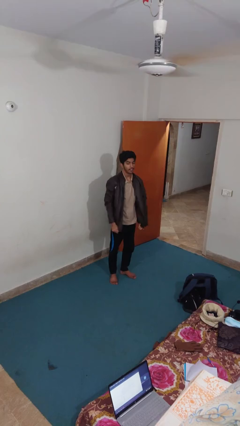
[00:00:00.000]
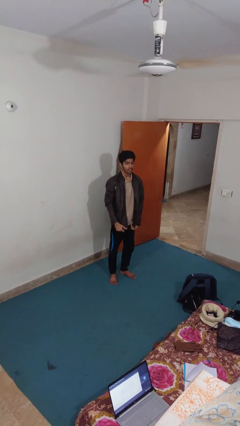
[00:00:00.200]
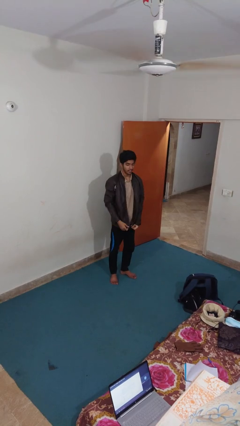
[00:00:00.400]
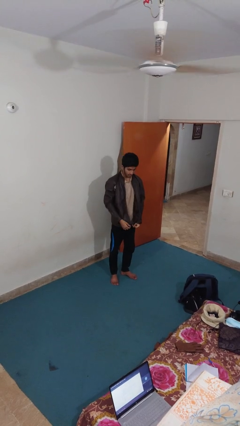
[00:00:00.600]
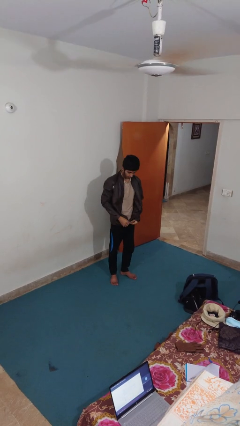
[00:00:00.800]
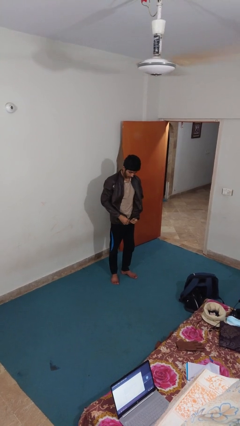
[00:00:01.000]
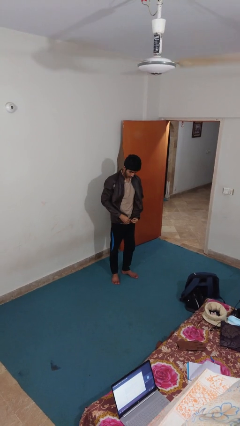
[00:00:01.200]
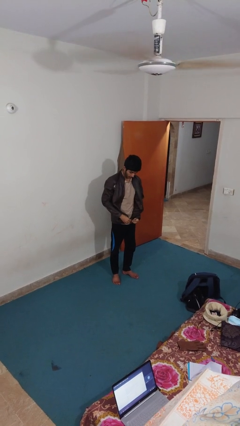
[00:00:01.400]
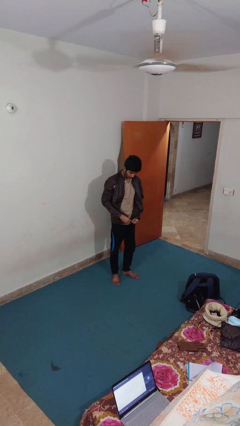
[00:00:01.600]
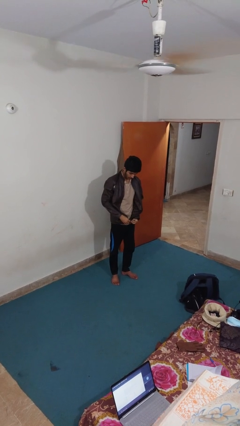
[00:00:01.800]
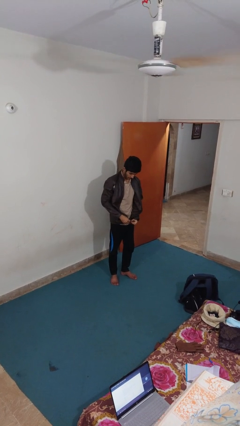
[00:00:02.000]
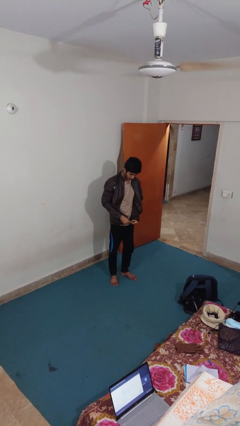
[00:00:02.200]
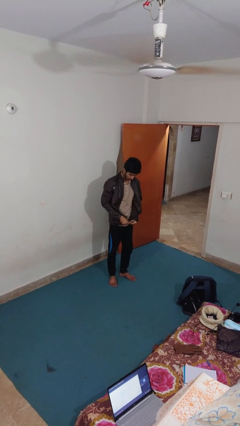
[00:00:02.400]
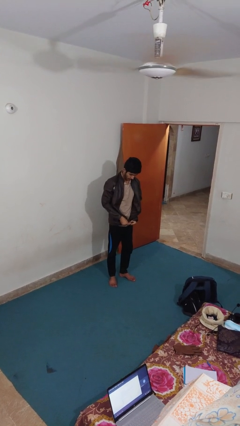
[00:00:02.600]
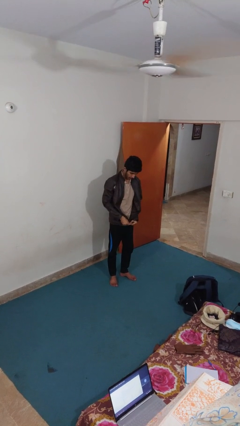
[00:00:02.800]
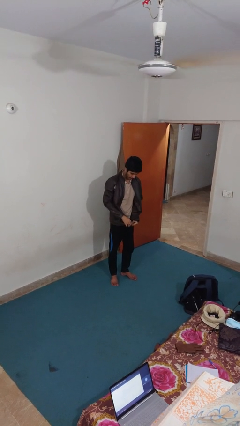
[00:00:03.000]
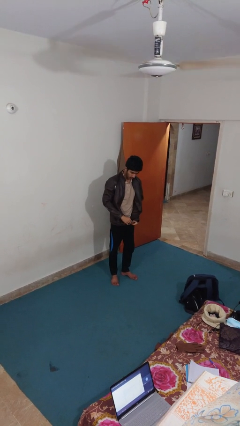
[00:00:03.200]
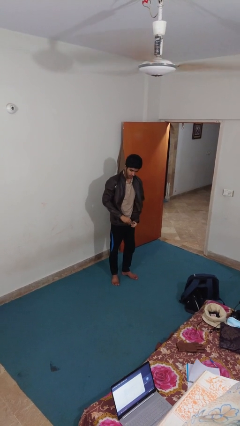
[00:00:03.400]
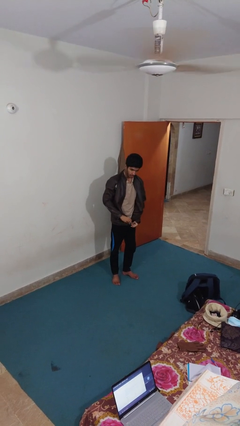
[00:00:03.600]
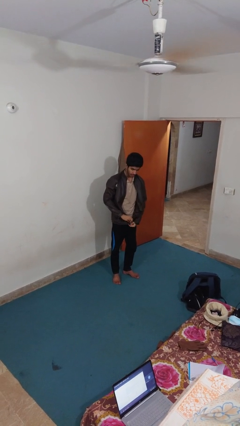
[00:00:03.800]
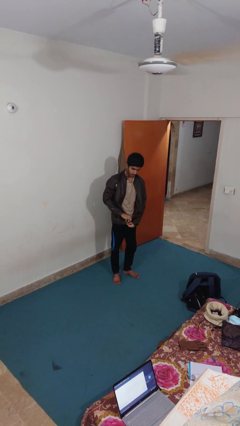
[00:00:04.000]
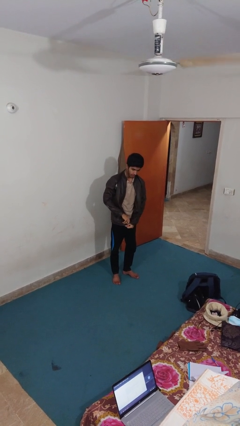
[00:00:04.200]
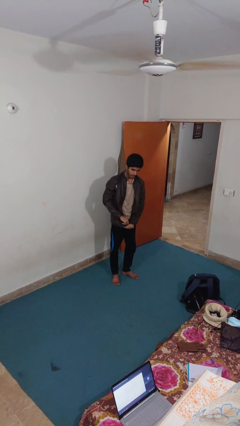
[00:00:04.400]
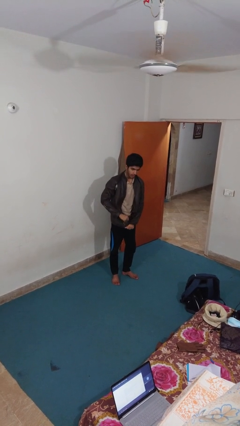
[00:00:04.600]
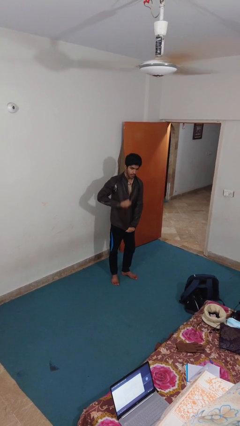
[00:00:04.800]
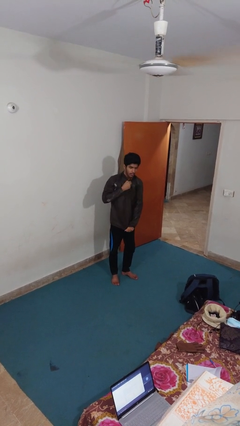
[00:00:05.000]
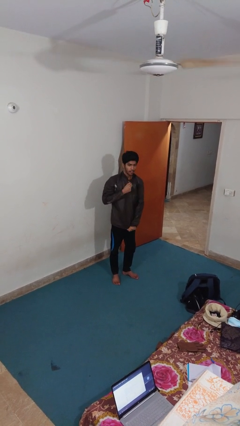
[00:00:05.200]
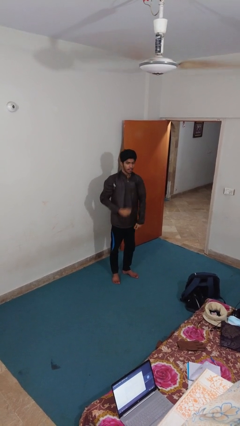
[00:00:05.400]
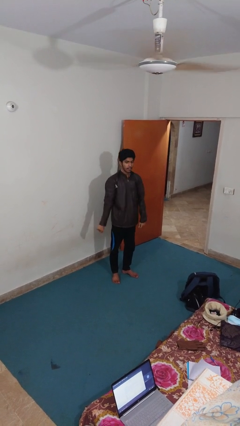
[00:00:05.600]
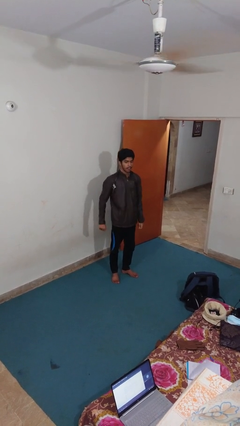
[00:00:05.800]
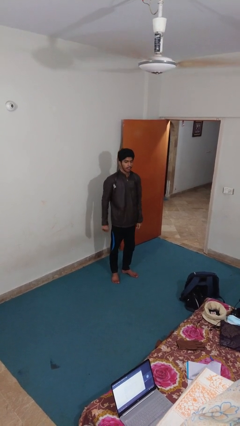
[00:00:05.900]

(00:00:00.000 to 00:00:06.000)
person zips up jacket

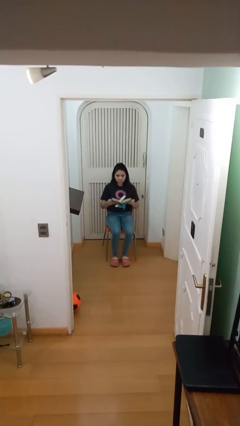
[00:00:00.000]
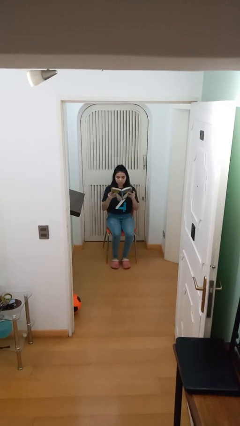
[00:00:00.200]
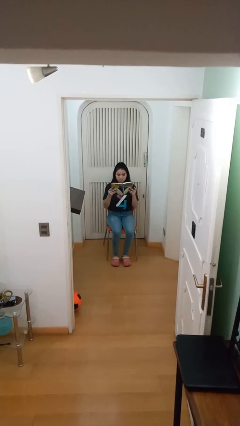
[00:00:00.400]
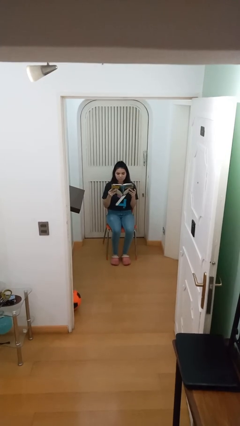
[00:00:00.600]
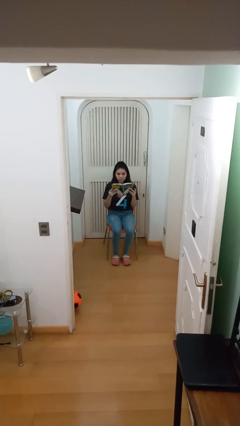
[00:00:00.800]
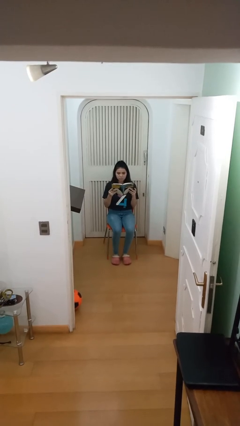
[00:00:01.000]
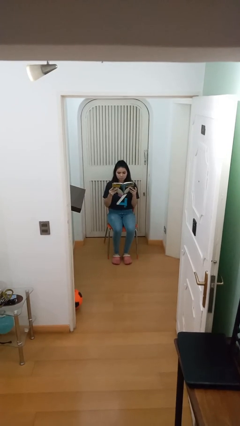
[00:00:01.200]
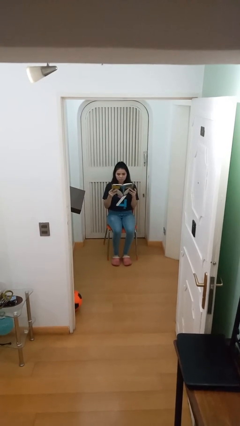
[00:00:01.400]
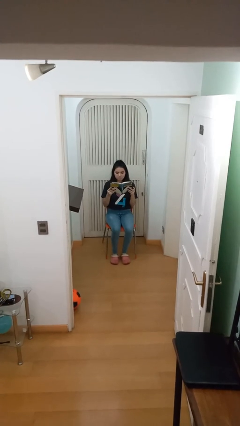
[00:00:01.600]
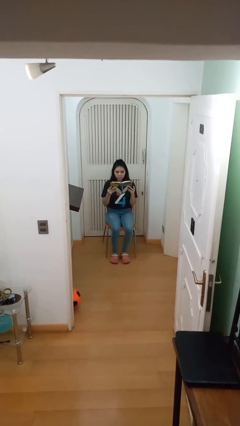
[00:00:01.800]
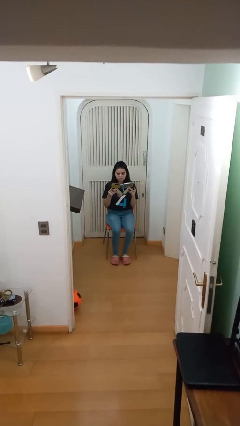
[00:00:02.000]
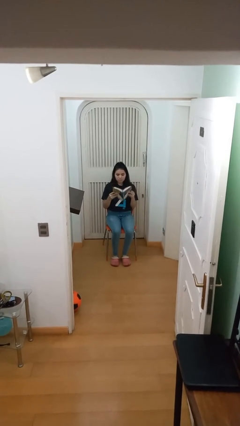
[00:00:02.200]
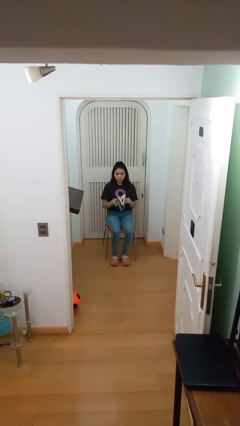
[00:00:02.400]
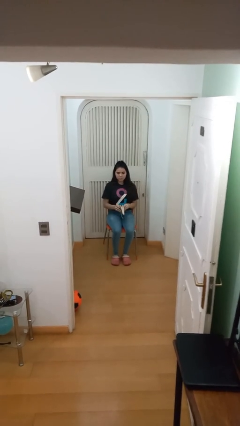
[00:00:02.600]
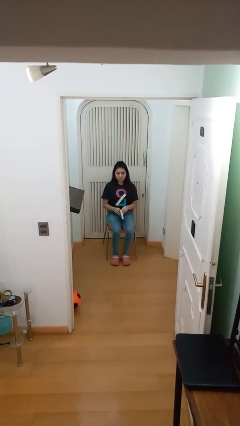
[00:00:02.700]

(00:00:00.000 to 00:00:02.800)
person reads document

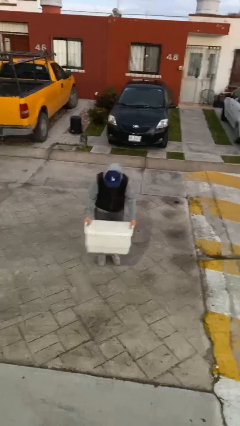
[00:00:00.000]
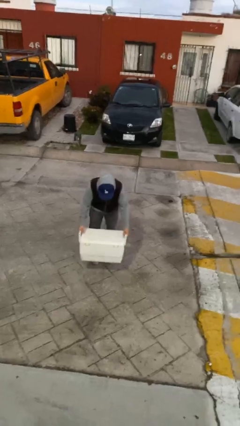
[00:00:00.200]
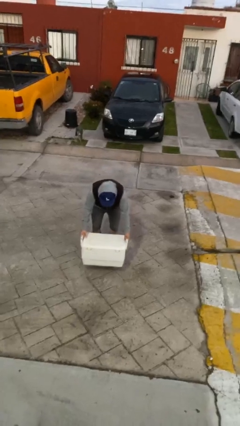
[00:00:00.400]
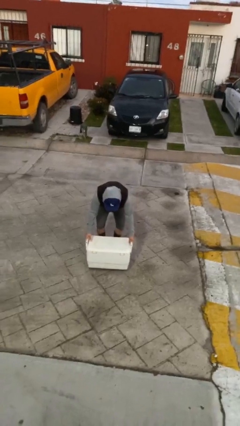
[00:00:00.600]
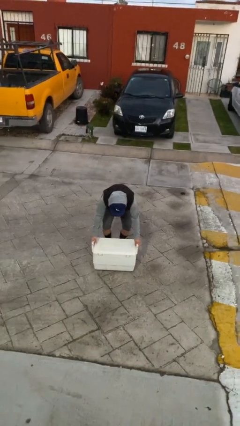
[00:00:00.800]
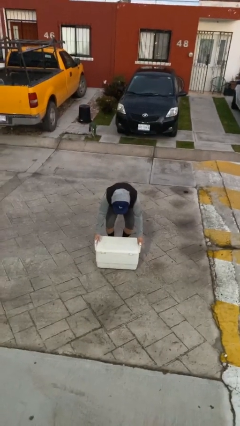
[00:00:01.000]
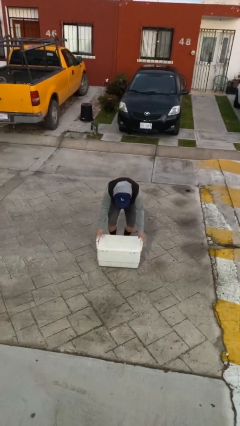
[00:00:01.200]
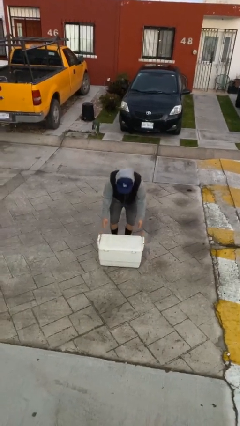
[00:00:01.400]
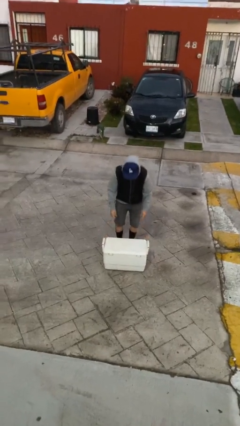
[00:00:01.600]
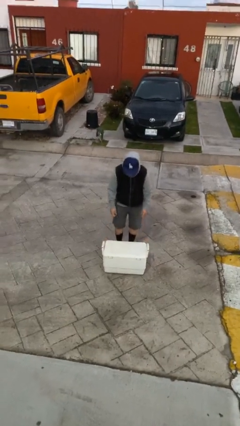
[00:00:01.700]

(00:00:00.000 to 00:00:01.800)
person puts down object on floor

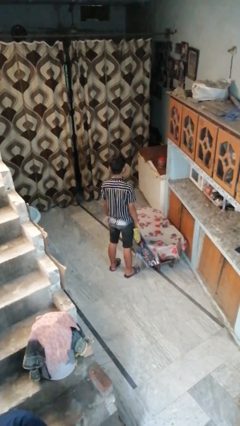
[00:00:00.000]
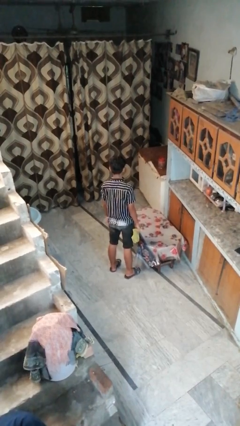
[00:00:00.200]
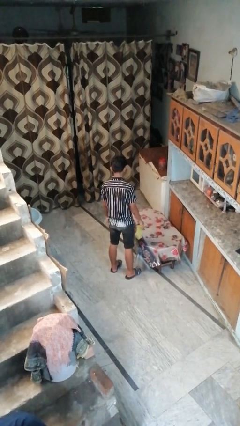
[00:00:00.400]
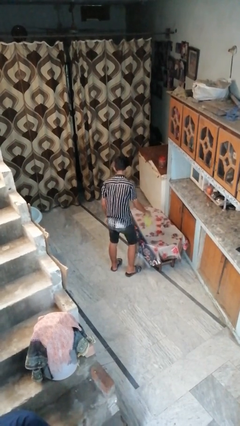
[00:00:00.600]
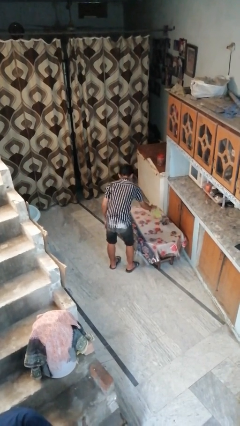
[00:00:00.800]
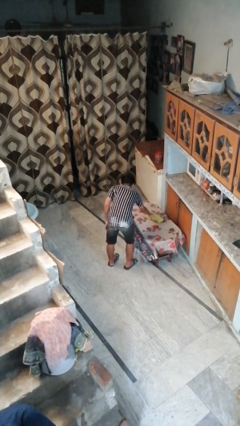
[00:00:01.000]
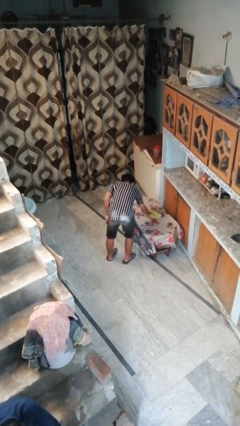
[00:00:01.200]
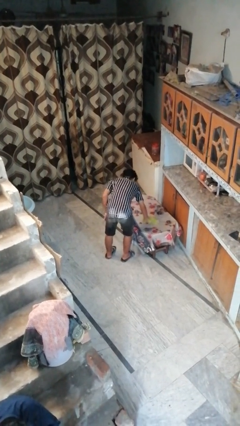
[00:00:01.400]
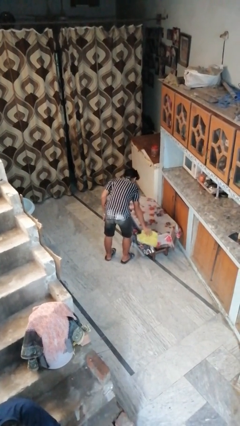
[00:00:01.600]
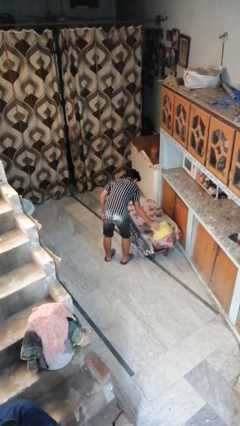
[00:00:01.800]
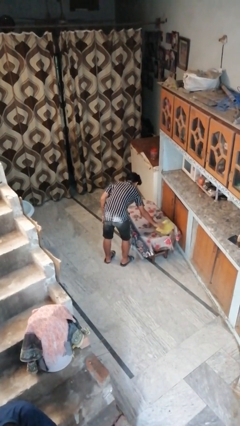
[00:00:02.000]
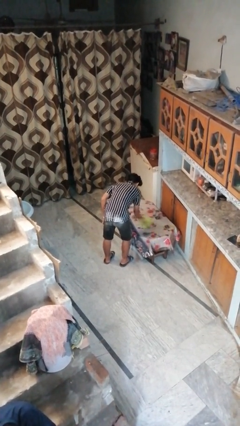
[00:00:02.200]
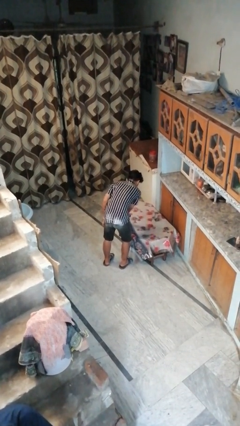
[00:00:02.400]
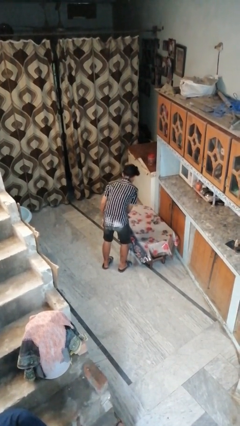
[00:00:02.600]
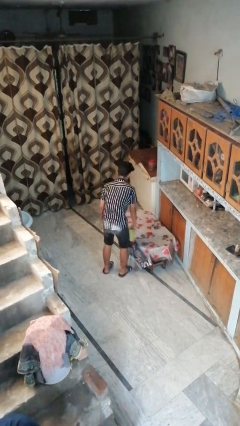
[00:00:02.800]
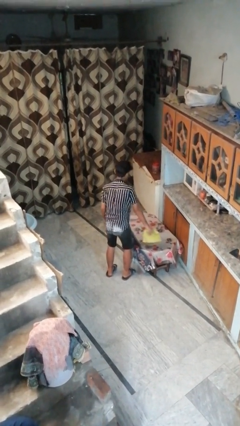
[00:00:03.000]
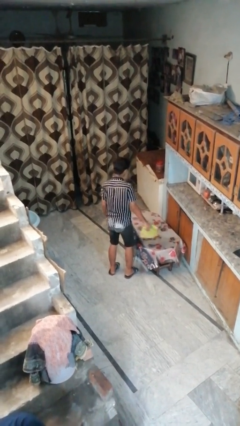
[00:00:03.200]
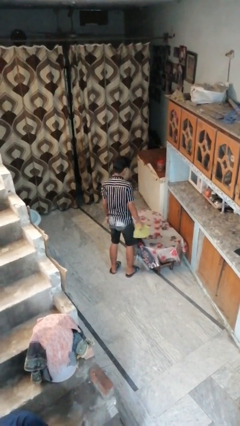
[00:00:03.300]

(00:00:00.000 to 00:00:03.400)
person cleans table with rag

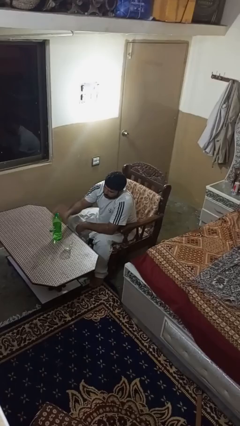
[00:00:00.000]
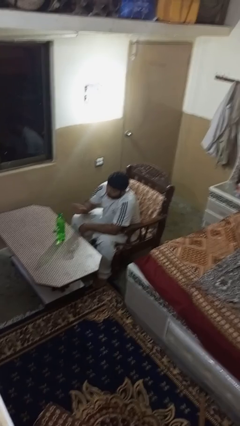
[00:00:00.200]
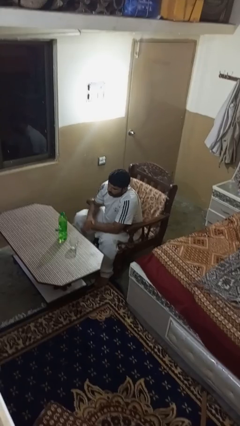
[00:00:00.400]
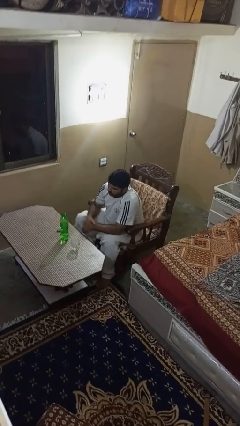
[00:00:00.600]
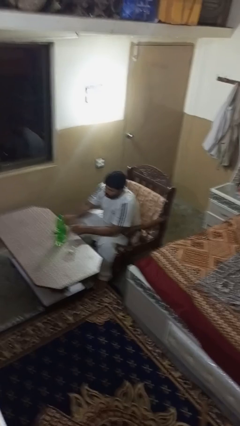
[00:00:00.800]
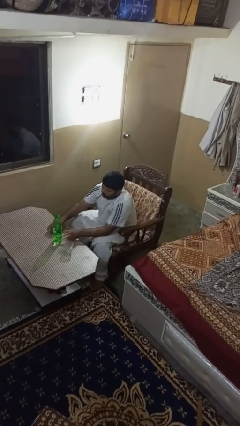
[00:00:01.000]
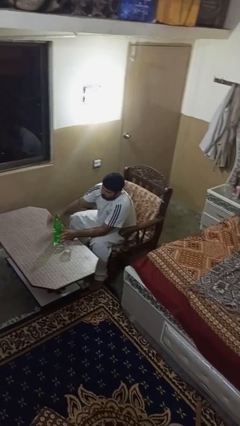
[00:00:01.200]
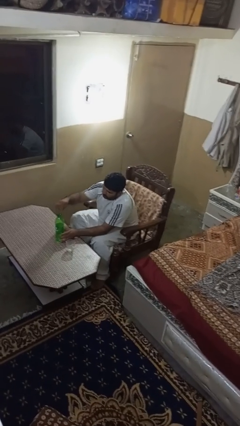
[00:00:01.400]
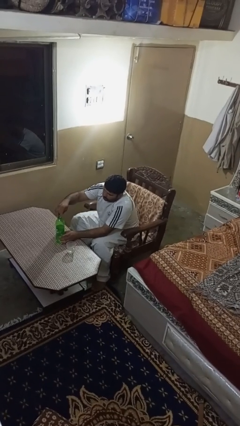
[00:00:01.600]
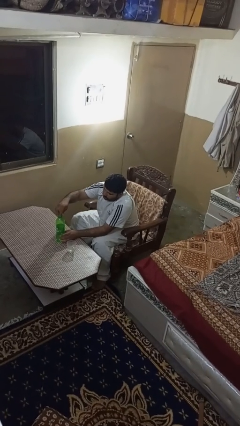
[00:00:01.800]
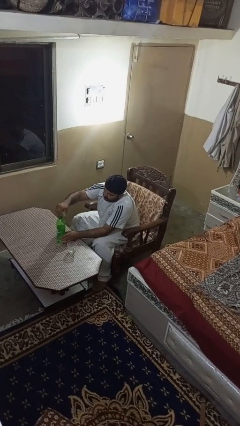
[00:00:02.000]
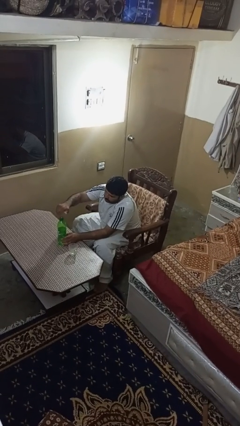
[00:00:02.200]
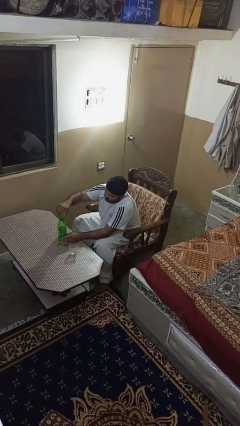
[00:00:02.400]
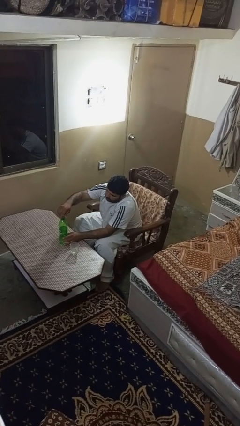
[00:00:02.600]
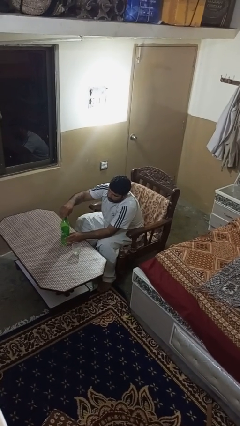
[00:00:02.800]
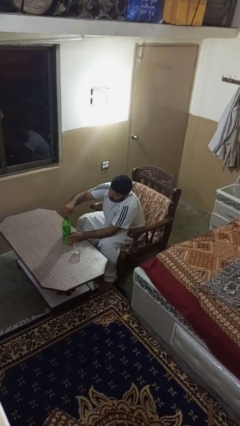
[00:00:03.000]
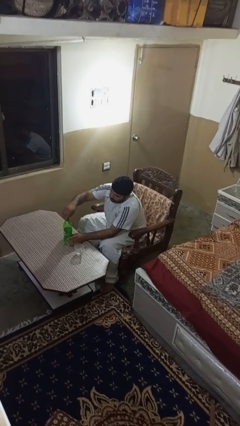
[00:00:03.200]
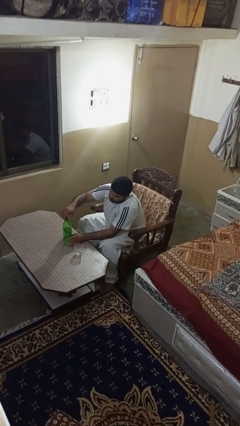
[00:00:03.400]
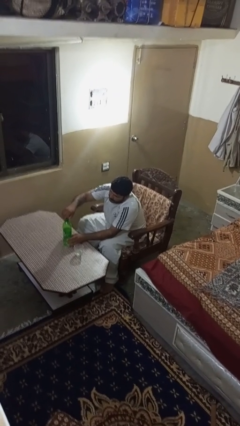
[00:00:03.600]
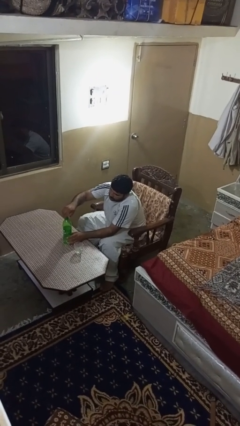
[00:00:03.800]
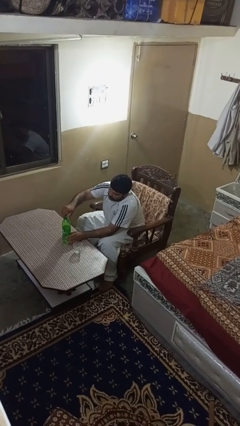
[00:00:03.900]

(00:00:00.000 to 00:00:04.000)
person screws lid to bottle
